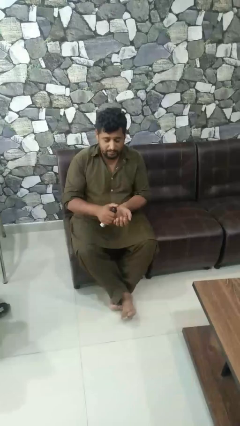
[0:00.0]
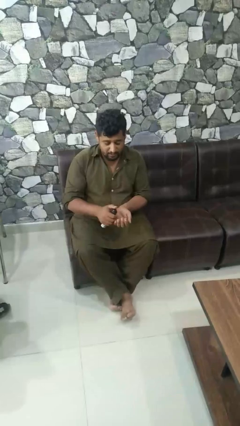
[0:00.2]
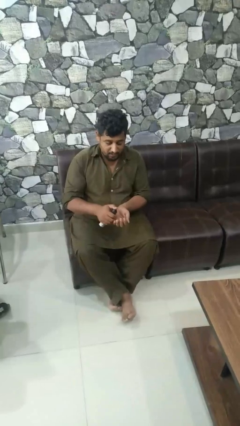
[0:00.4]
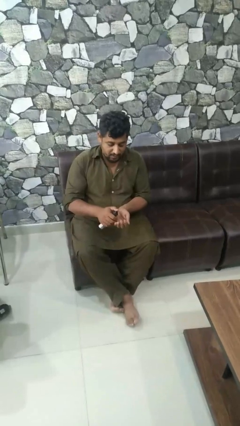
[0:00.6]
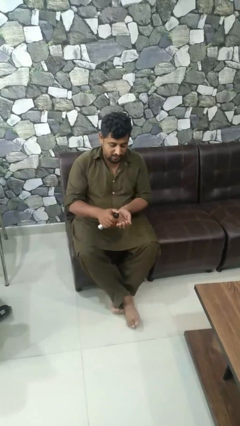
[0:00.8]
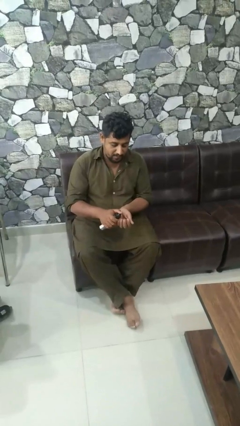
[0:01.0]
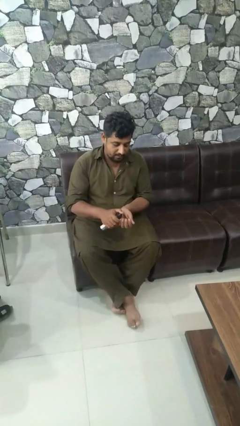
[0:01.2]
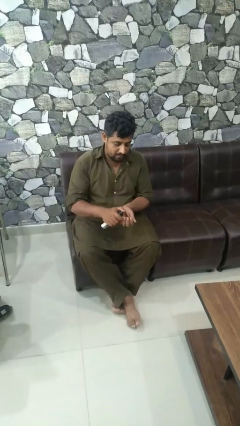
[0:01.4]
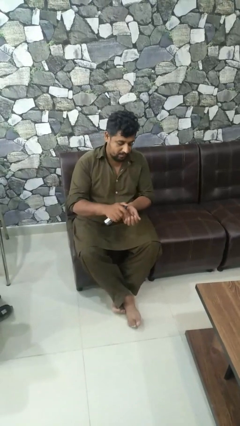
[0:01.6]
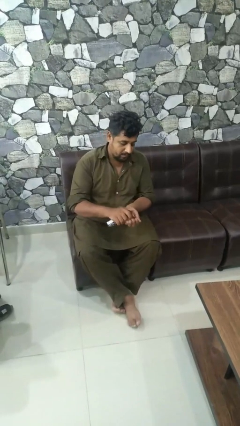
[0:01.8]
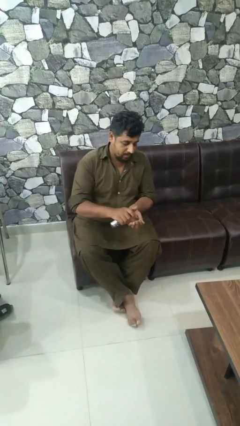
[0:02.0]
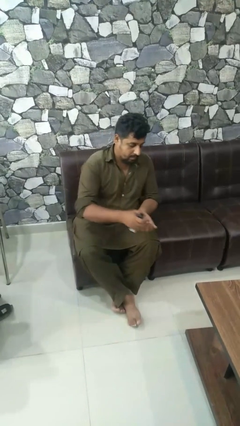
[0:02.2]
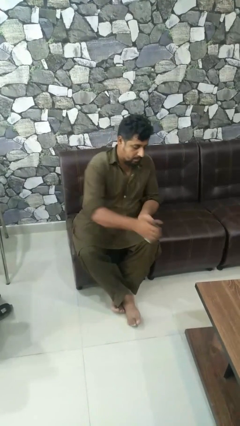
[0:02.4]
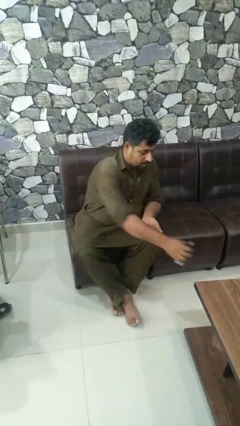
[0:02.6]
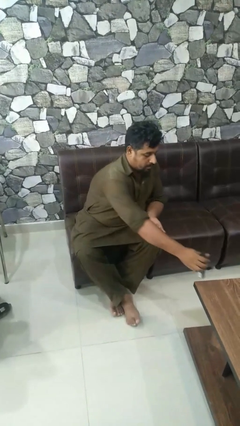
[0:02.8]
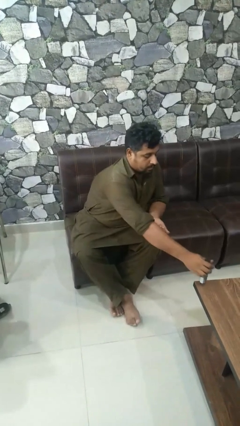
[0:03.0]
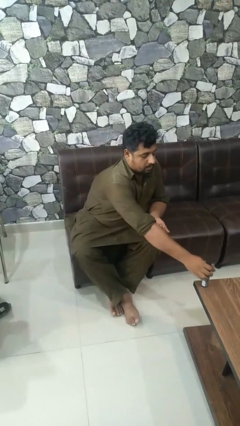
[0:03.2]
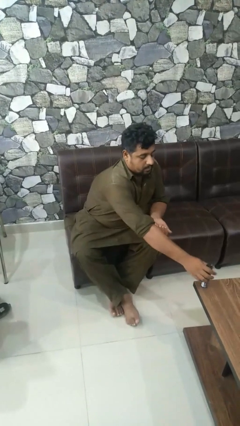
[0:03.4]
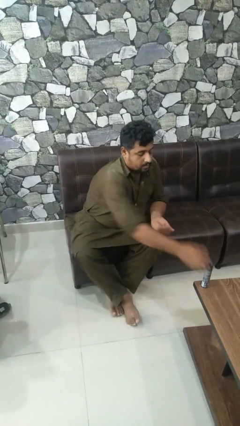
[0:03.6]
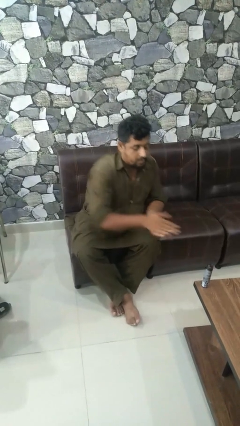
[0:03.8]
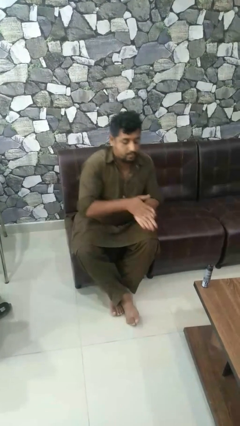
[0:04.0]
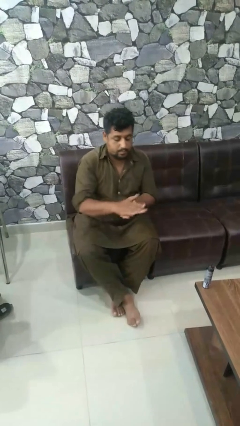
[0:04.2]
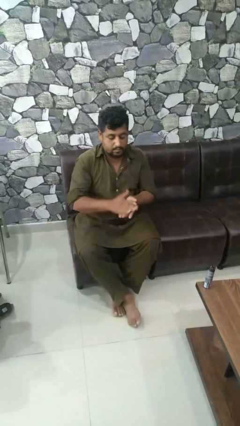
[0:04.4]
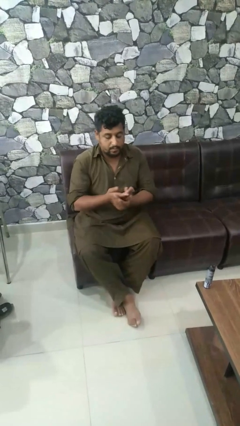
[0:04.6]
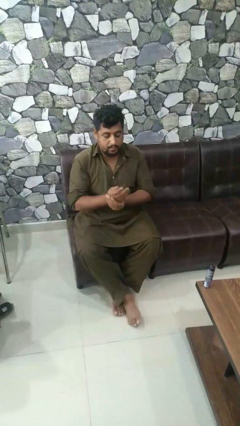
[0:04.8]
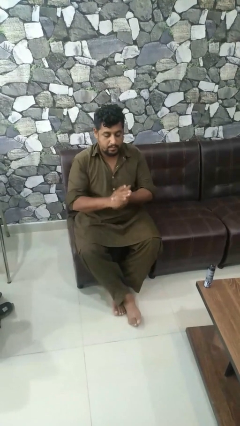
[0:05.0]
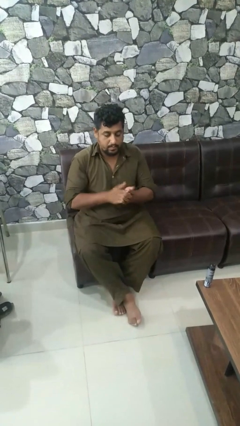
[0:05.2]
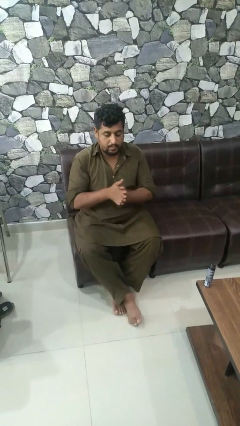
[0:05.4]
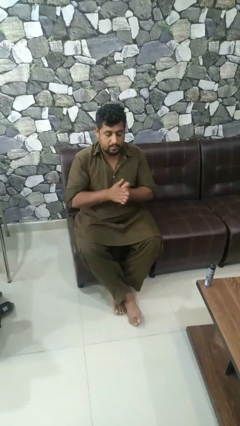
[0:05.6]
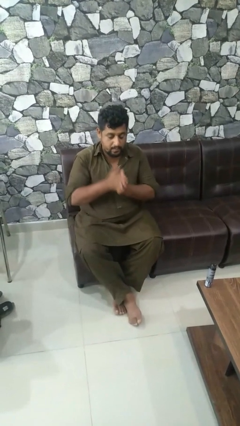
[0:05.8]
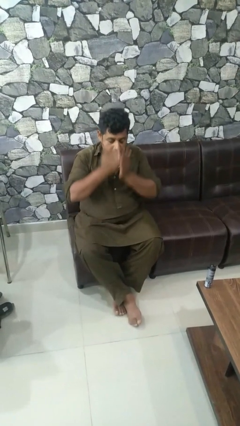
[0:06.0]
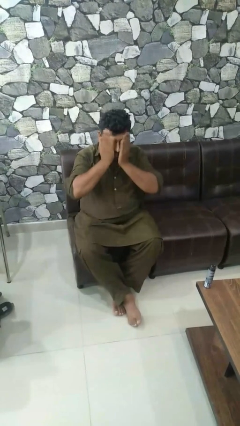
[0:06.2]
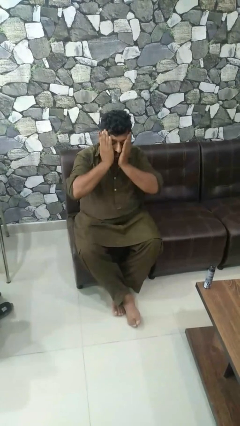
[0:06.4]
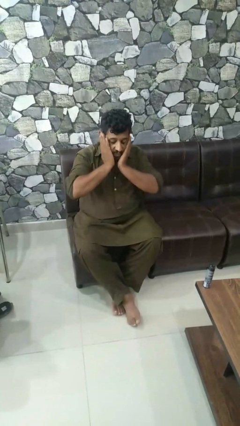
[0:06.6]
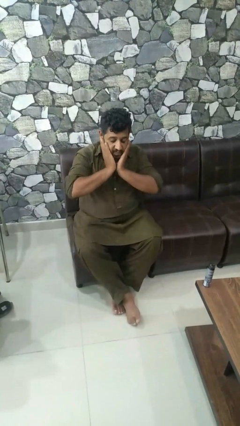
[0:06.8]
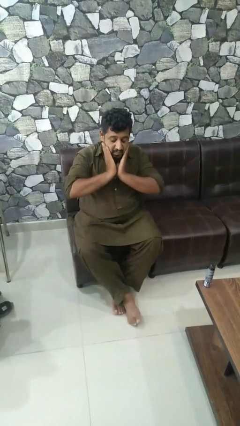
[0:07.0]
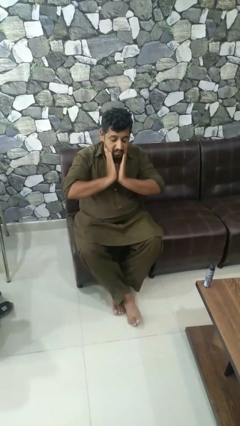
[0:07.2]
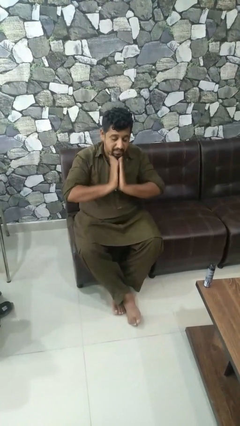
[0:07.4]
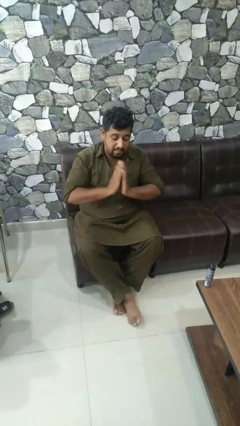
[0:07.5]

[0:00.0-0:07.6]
person applies sunscreen

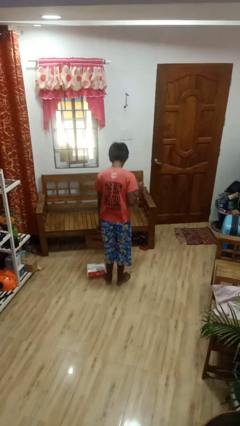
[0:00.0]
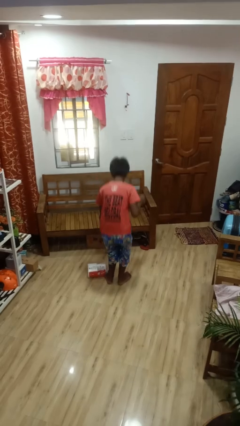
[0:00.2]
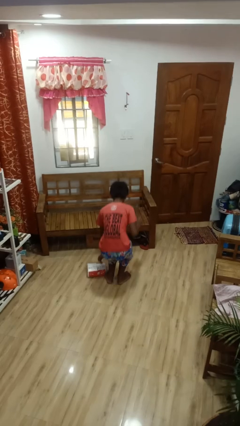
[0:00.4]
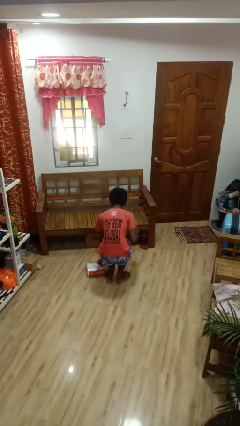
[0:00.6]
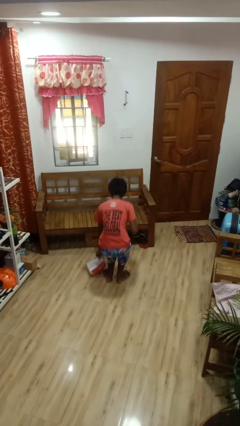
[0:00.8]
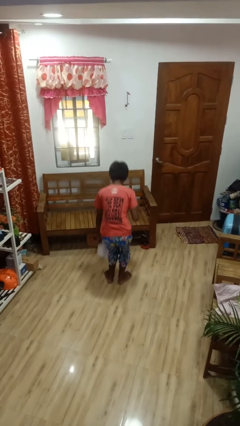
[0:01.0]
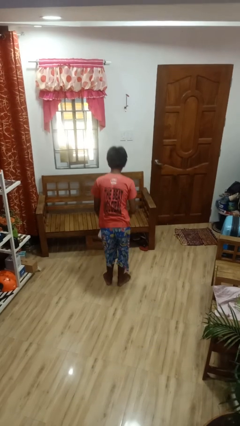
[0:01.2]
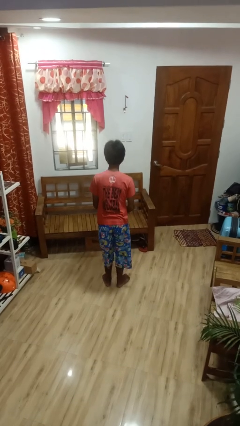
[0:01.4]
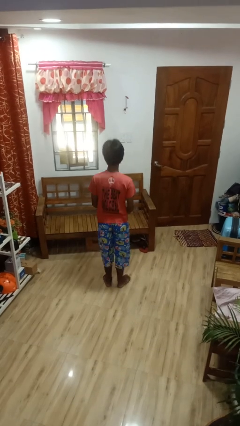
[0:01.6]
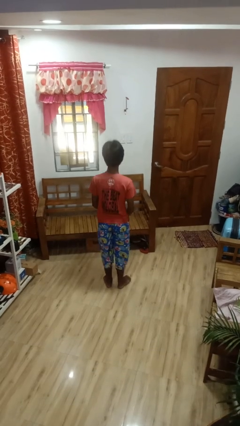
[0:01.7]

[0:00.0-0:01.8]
person picks up object from floor

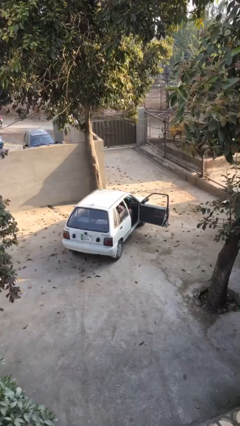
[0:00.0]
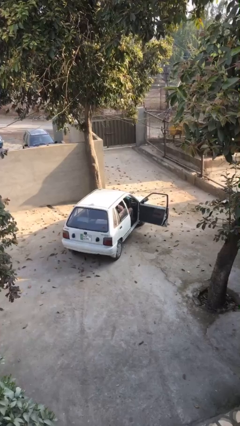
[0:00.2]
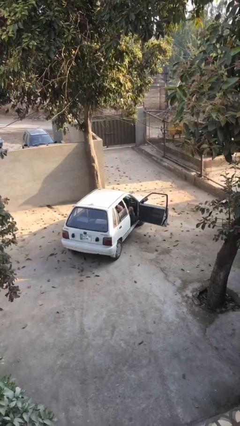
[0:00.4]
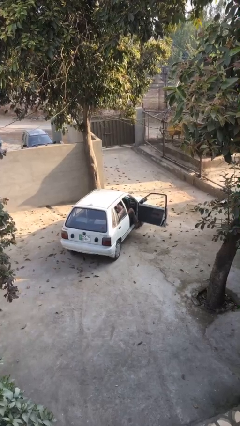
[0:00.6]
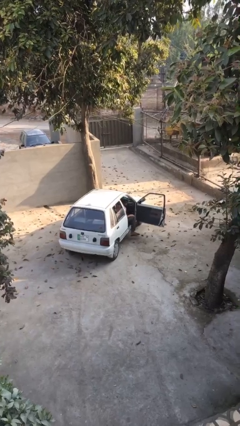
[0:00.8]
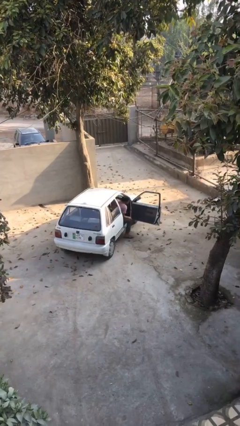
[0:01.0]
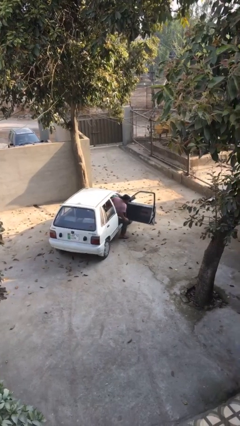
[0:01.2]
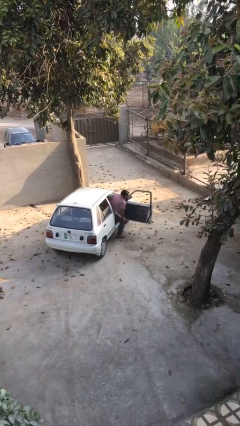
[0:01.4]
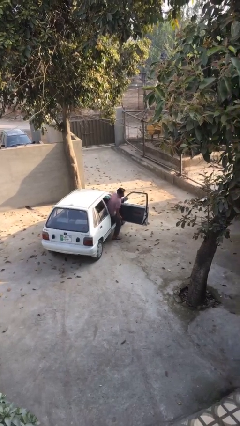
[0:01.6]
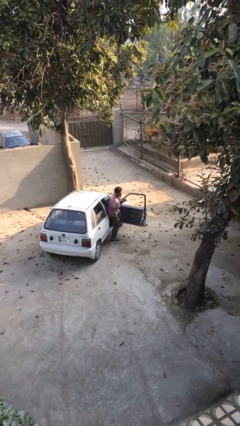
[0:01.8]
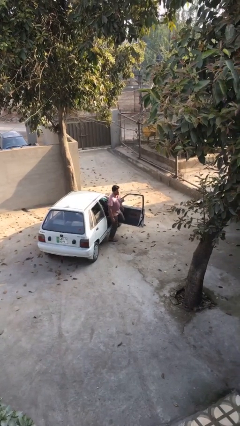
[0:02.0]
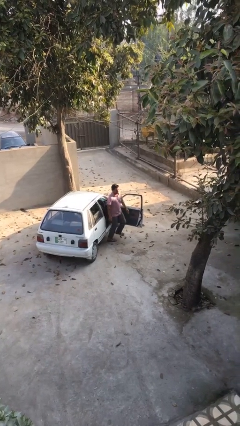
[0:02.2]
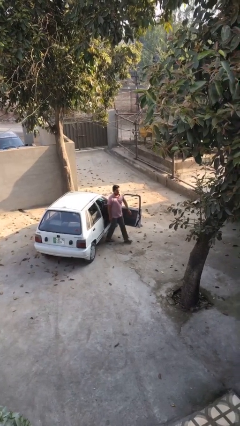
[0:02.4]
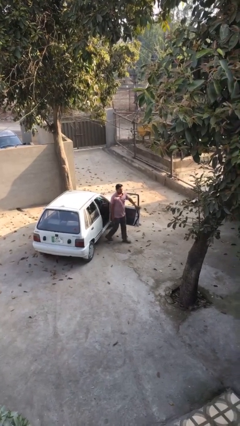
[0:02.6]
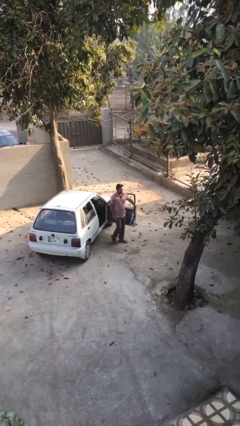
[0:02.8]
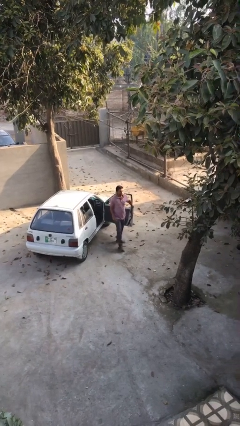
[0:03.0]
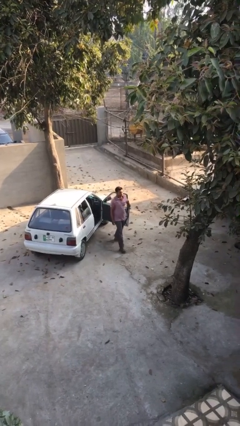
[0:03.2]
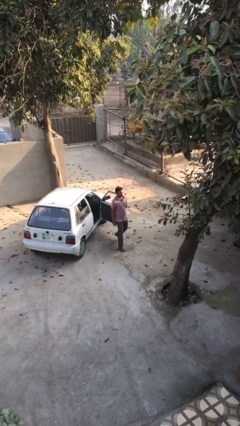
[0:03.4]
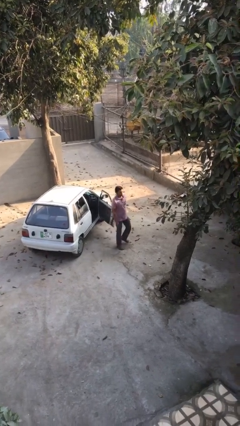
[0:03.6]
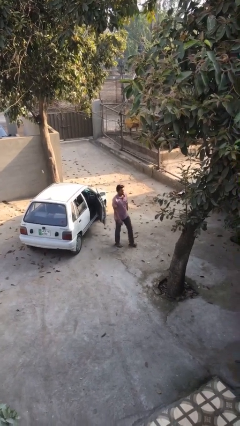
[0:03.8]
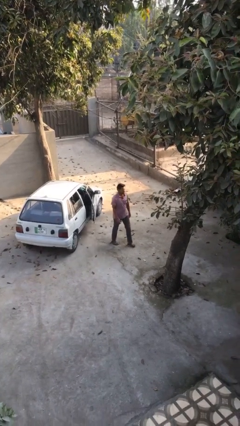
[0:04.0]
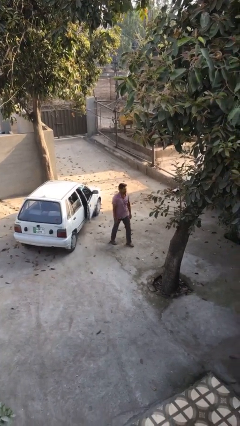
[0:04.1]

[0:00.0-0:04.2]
person exits car

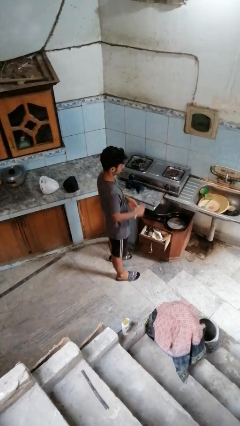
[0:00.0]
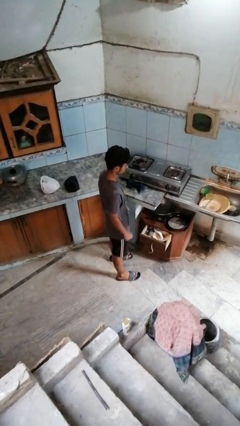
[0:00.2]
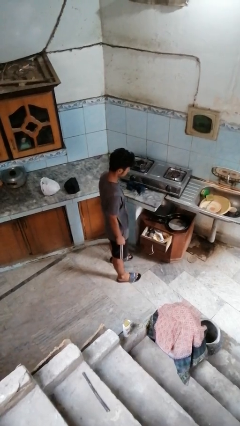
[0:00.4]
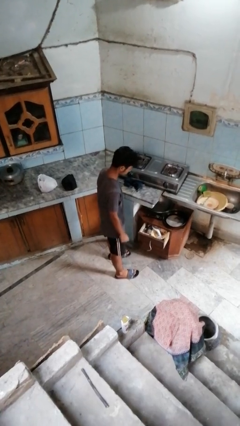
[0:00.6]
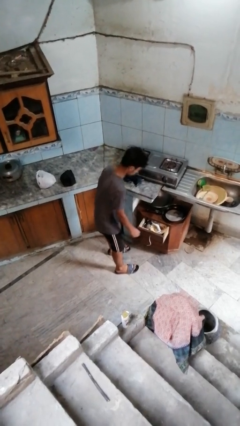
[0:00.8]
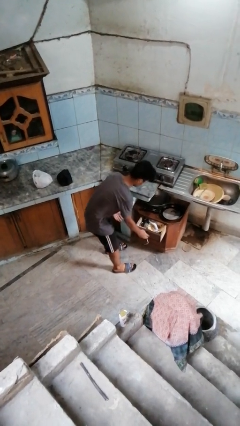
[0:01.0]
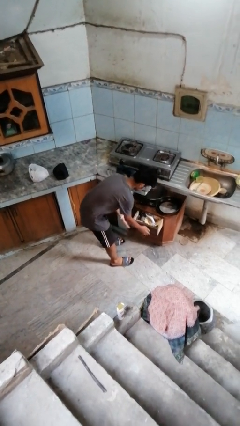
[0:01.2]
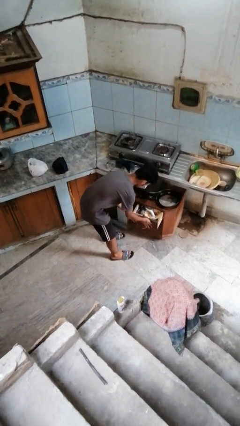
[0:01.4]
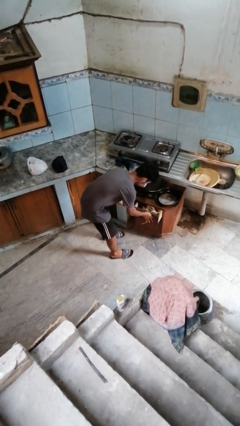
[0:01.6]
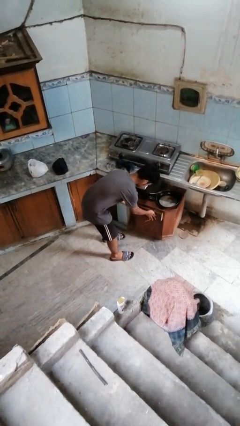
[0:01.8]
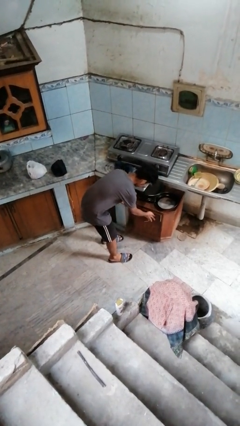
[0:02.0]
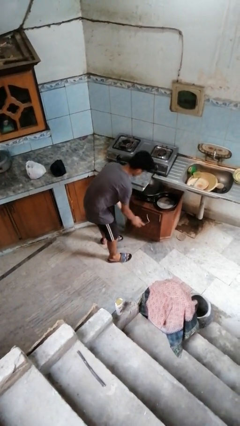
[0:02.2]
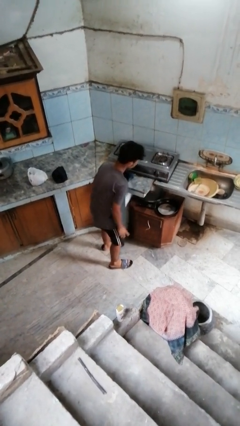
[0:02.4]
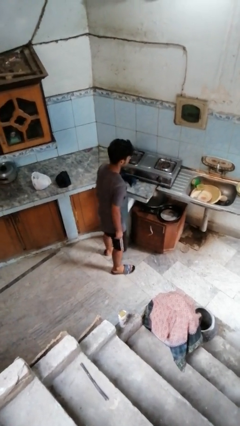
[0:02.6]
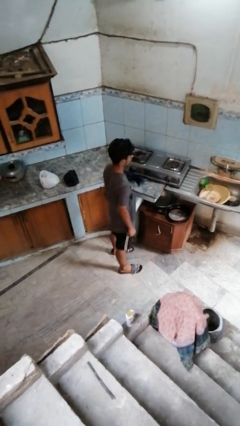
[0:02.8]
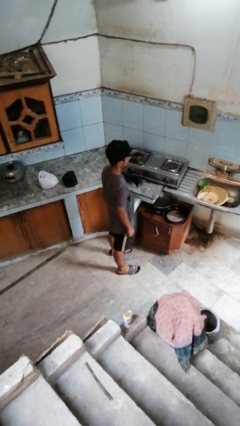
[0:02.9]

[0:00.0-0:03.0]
person closes kitchen drawer

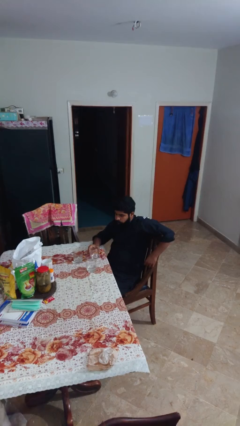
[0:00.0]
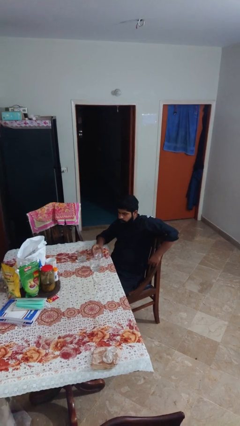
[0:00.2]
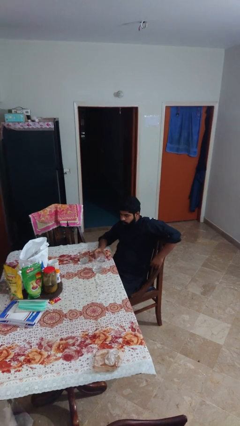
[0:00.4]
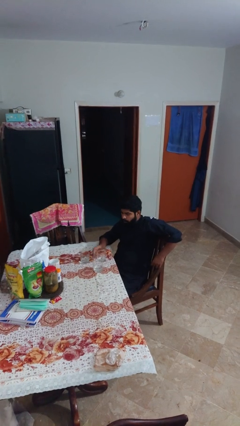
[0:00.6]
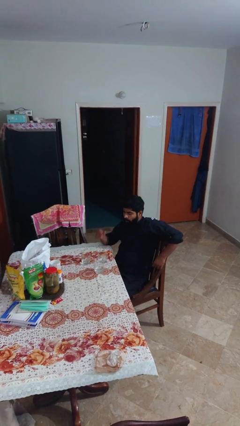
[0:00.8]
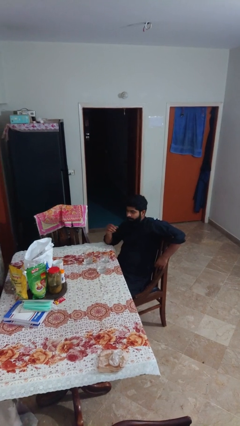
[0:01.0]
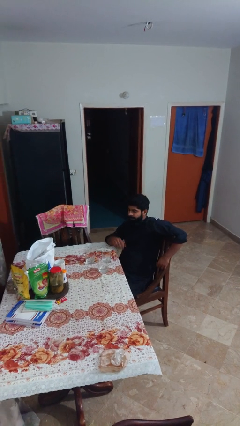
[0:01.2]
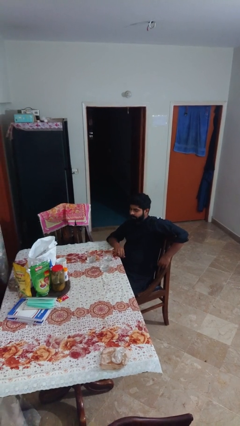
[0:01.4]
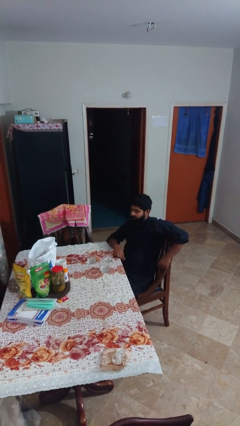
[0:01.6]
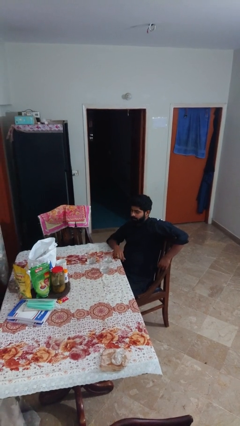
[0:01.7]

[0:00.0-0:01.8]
person puts down object on table
